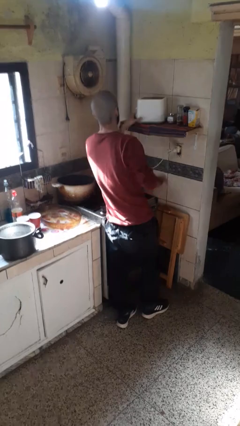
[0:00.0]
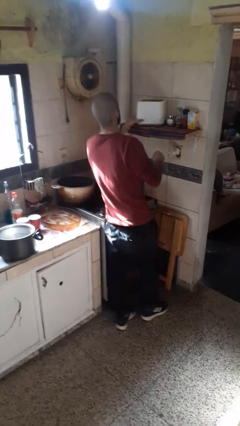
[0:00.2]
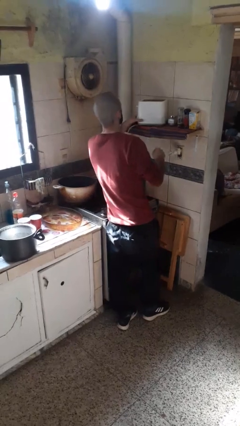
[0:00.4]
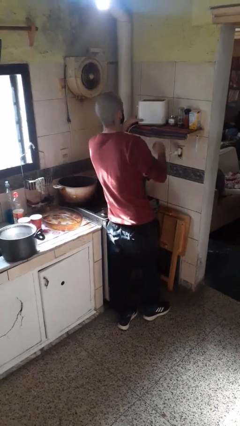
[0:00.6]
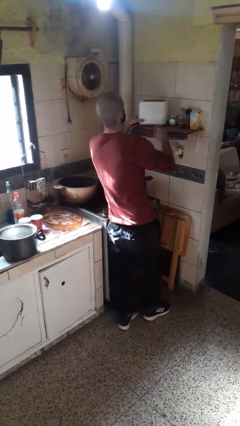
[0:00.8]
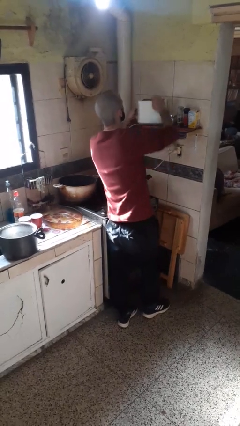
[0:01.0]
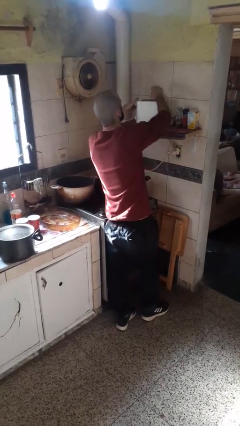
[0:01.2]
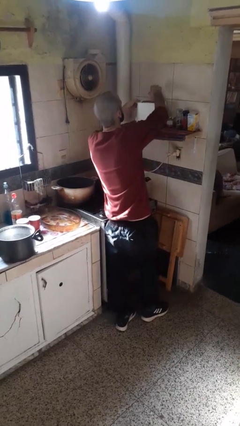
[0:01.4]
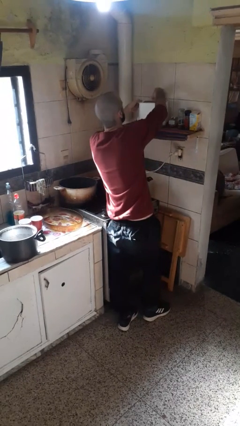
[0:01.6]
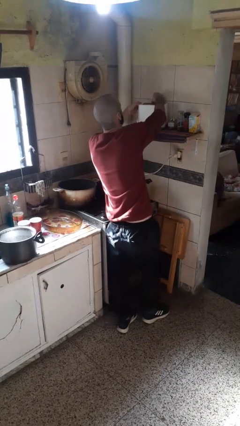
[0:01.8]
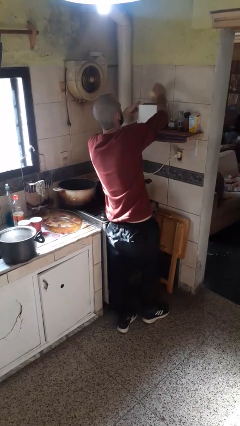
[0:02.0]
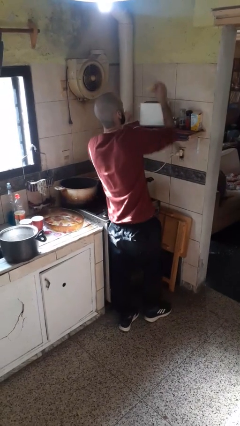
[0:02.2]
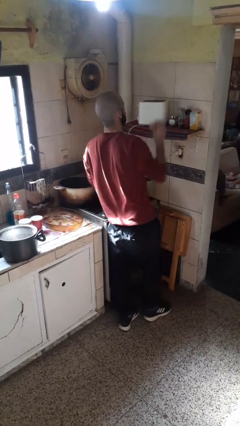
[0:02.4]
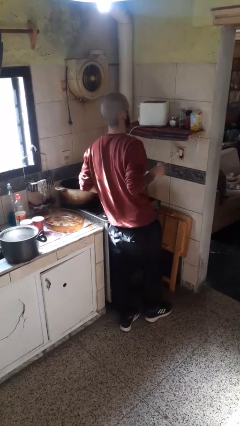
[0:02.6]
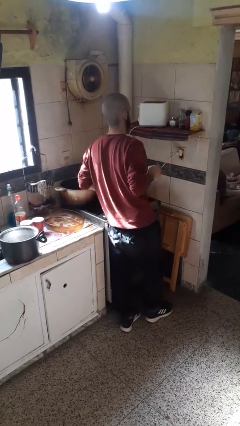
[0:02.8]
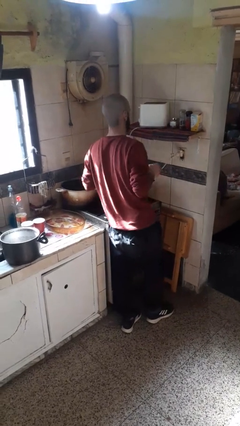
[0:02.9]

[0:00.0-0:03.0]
person takes object from toaster

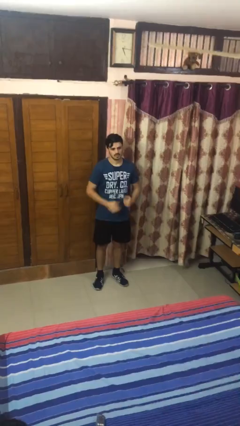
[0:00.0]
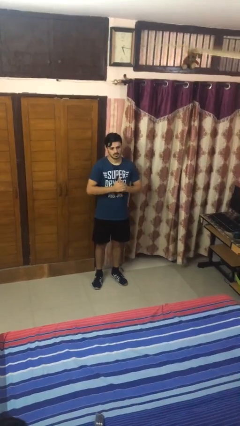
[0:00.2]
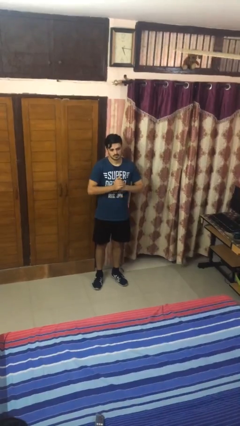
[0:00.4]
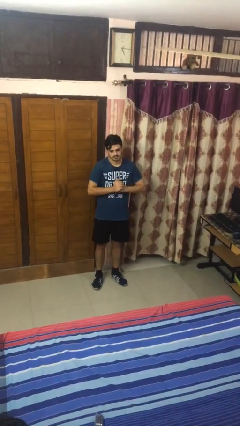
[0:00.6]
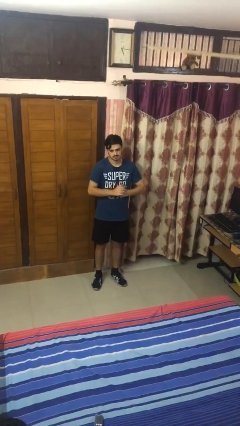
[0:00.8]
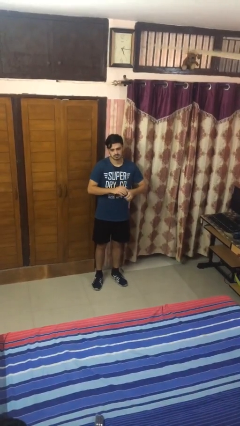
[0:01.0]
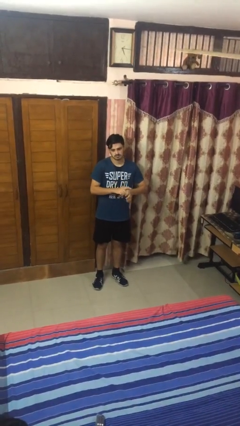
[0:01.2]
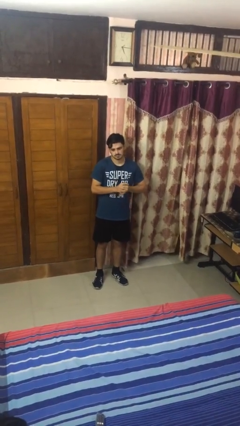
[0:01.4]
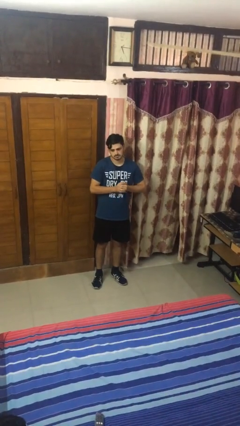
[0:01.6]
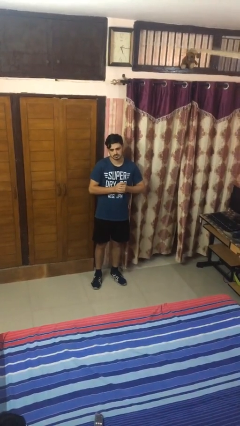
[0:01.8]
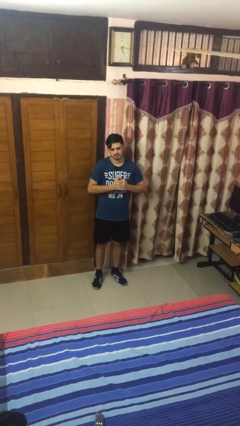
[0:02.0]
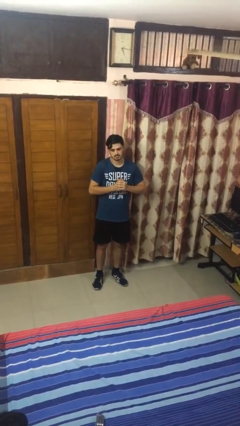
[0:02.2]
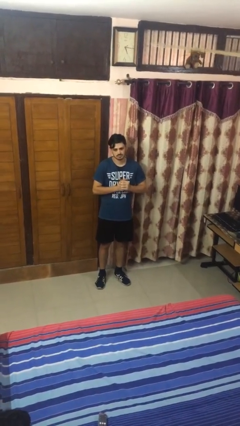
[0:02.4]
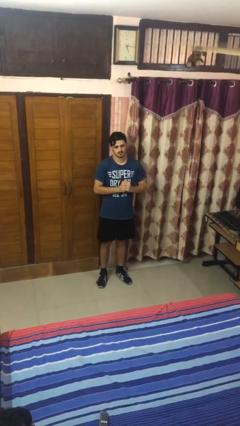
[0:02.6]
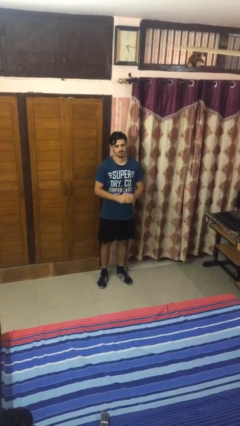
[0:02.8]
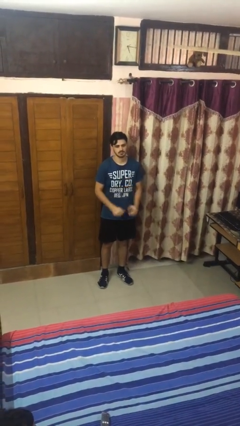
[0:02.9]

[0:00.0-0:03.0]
person cracks knuckles

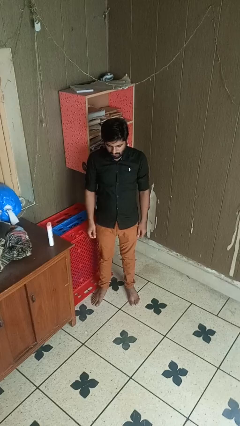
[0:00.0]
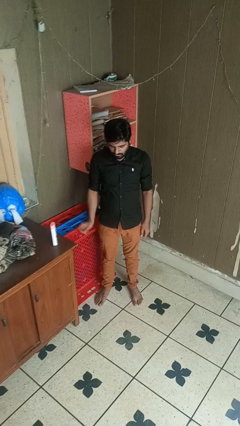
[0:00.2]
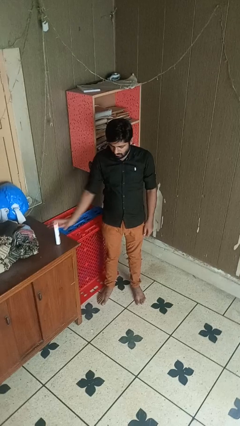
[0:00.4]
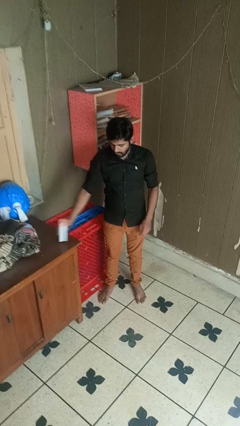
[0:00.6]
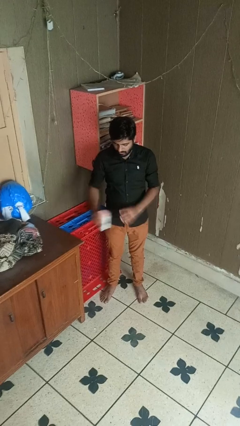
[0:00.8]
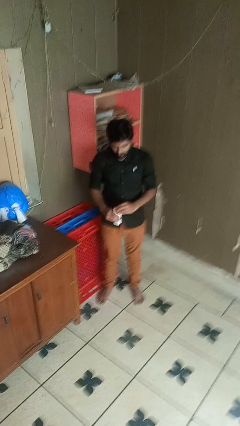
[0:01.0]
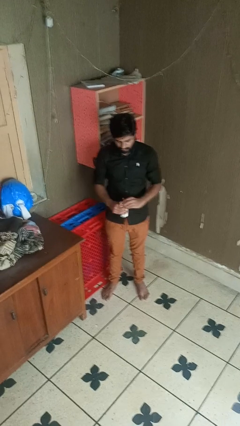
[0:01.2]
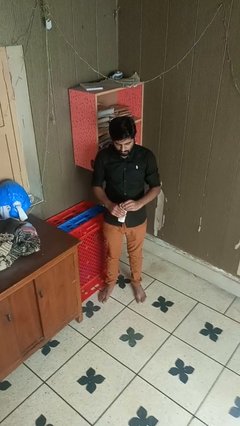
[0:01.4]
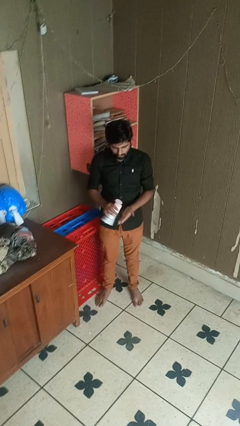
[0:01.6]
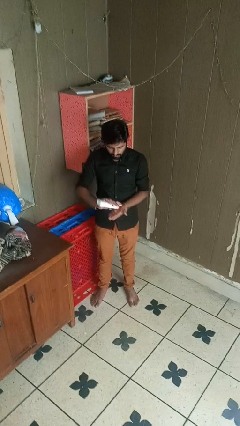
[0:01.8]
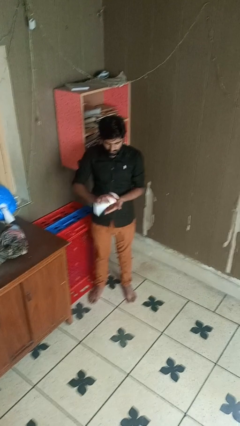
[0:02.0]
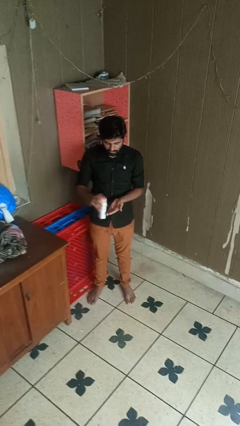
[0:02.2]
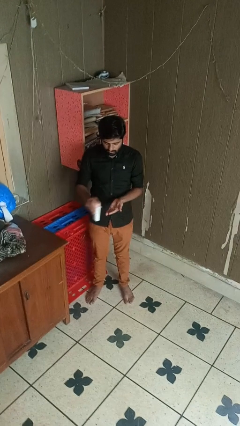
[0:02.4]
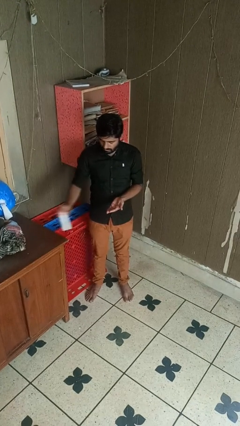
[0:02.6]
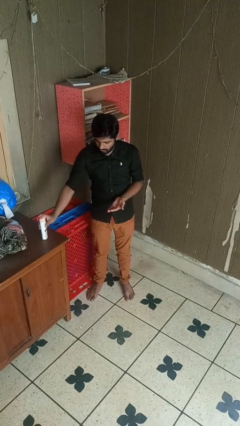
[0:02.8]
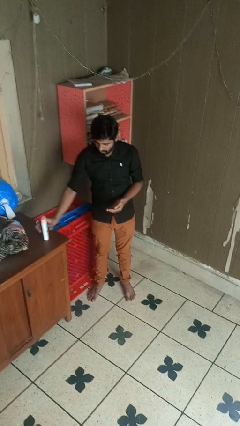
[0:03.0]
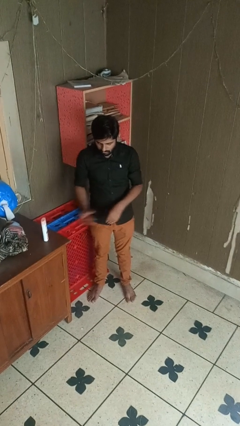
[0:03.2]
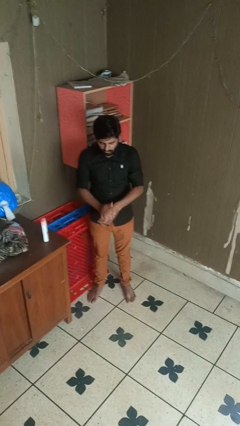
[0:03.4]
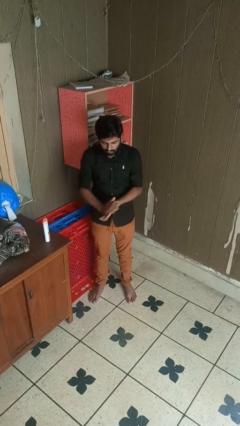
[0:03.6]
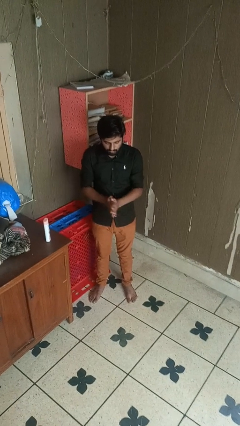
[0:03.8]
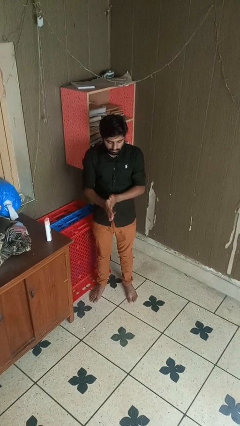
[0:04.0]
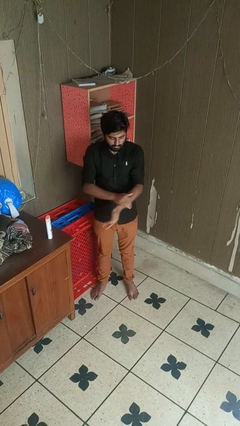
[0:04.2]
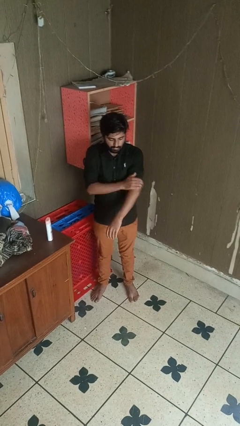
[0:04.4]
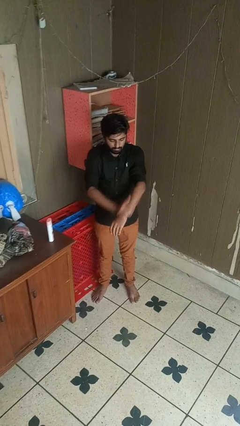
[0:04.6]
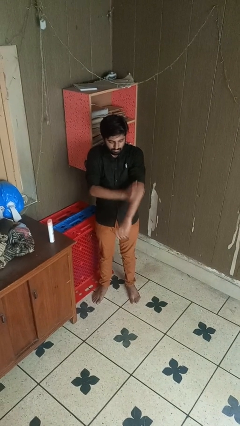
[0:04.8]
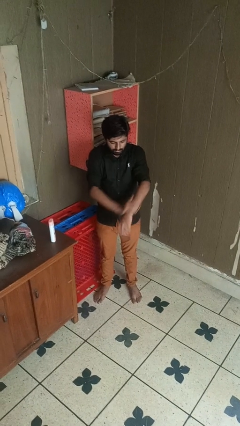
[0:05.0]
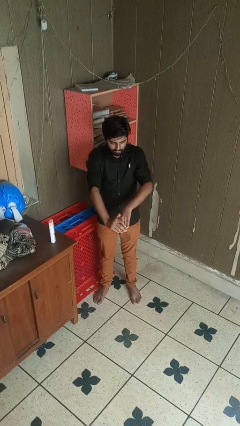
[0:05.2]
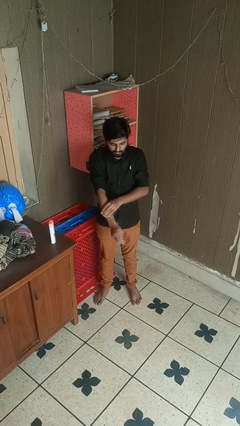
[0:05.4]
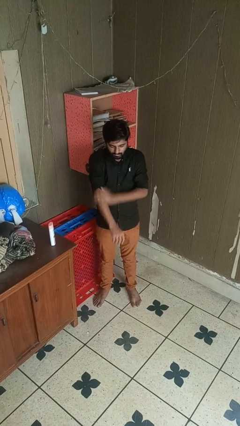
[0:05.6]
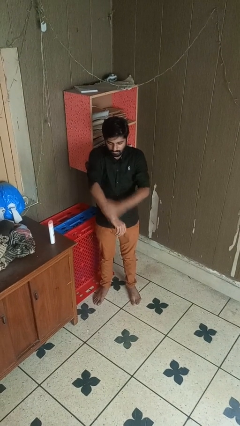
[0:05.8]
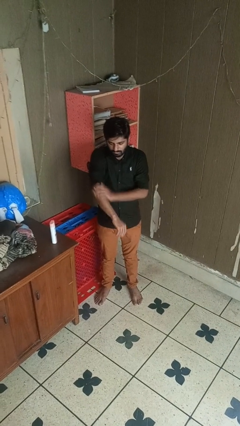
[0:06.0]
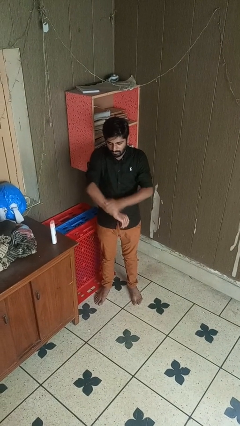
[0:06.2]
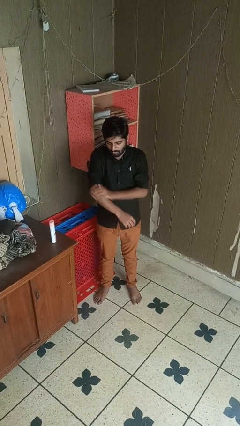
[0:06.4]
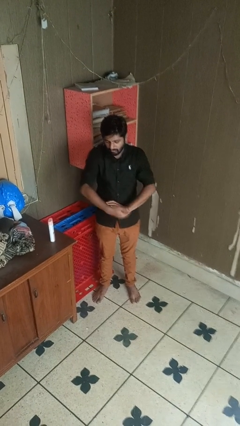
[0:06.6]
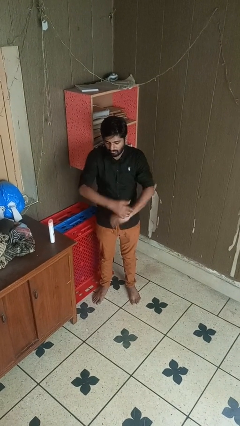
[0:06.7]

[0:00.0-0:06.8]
person applies facial moisturizer

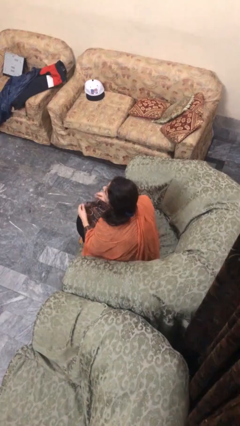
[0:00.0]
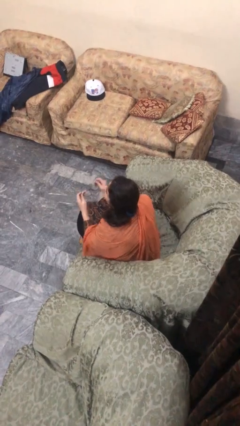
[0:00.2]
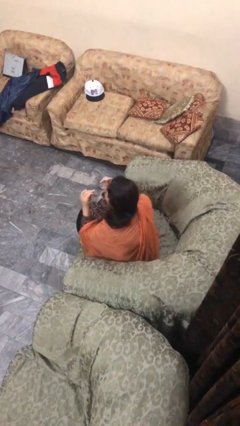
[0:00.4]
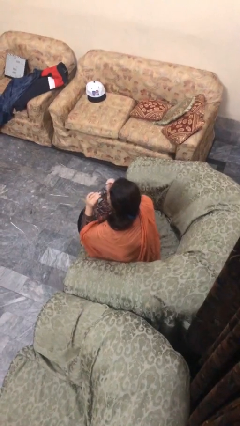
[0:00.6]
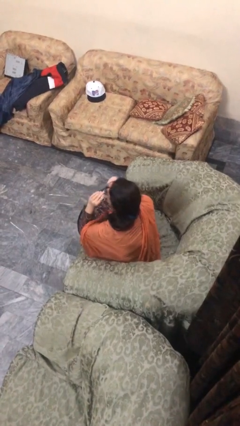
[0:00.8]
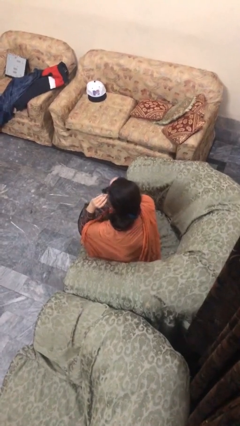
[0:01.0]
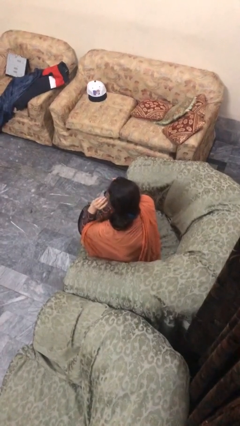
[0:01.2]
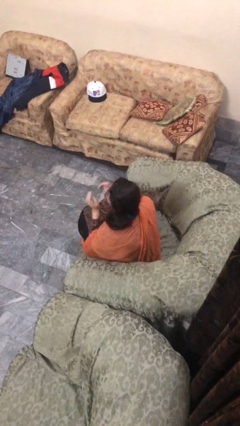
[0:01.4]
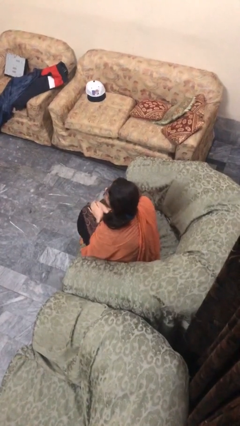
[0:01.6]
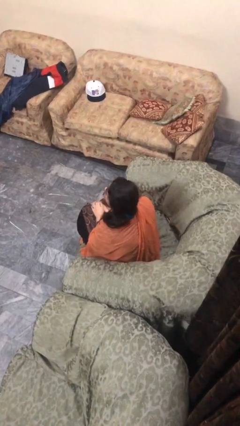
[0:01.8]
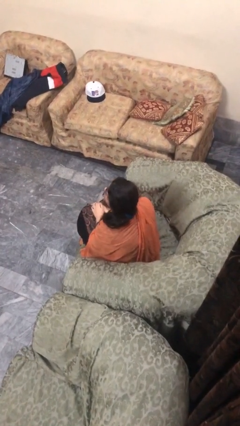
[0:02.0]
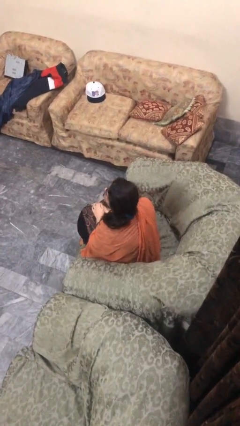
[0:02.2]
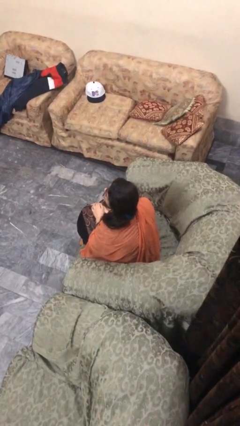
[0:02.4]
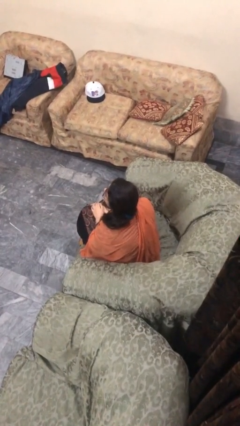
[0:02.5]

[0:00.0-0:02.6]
person puts on glasses

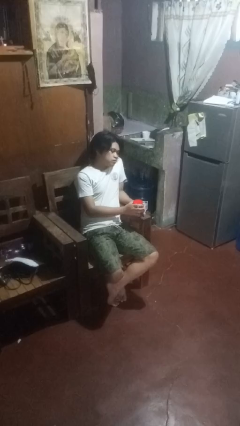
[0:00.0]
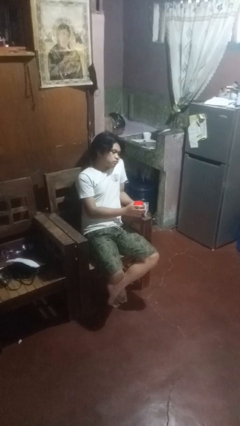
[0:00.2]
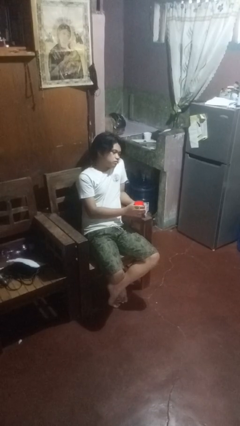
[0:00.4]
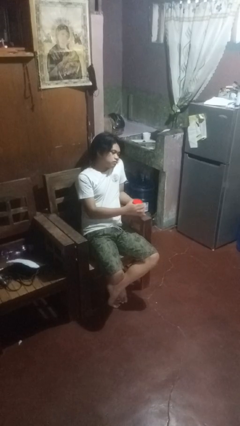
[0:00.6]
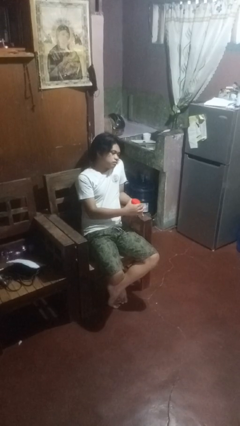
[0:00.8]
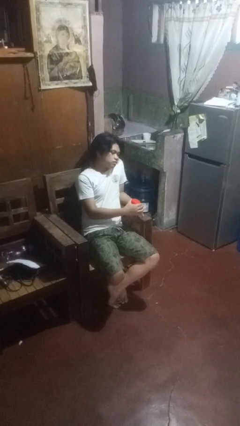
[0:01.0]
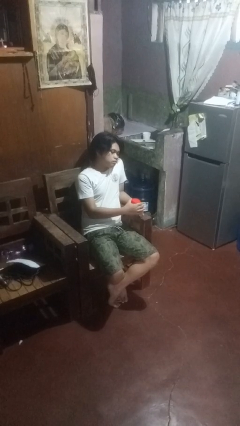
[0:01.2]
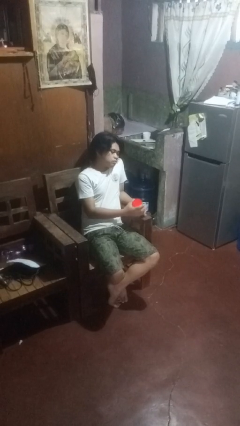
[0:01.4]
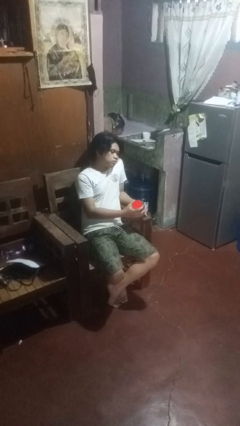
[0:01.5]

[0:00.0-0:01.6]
person opens jar

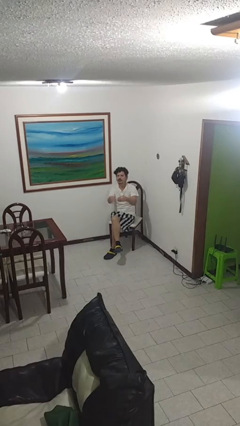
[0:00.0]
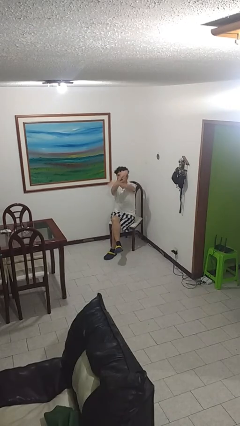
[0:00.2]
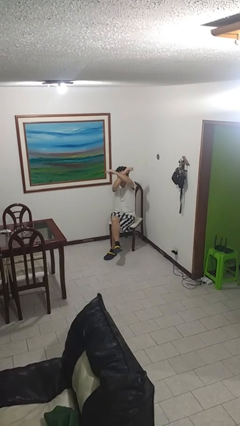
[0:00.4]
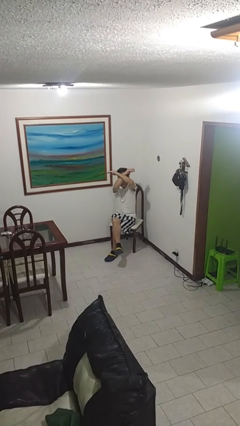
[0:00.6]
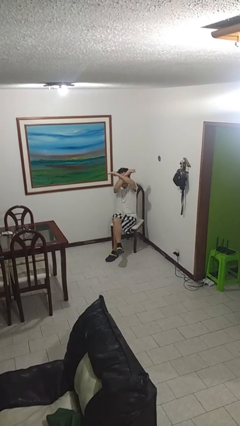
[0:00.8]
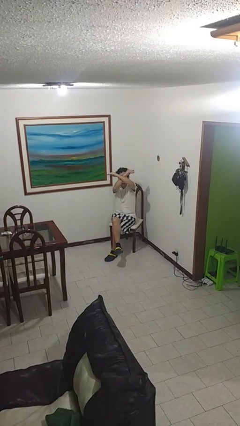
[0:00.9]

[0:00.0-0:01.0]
person gestures arms x
